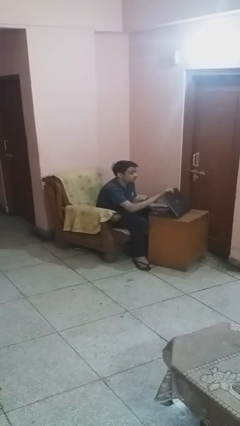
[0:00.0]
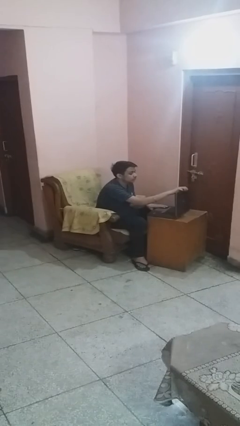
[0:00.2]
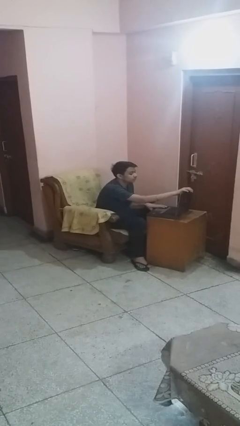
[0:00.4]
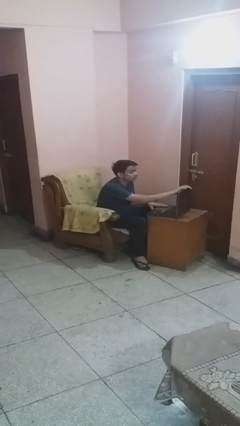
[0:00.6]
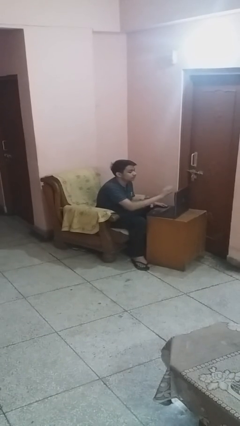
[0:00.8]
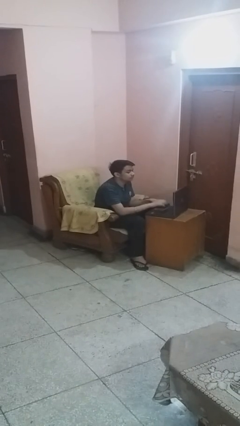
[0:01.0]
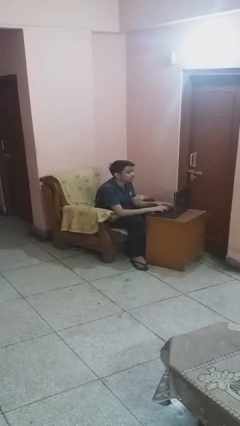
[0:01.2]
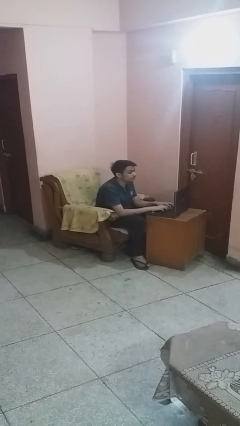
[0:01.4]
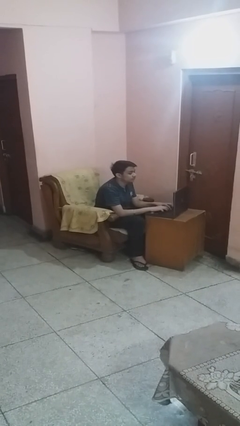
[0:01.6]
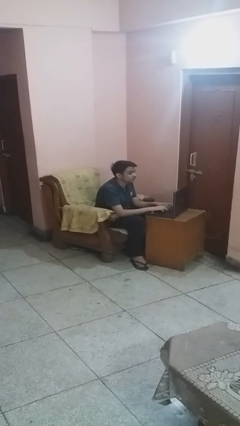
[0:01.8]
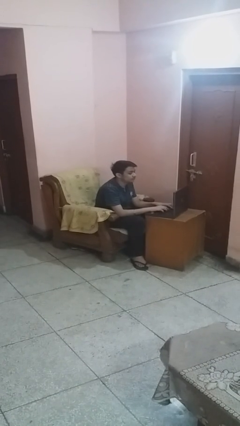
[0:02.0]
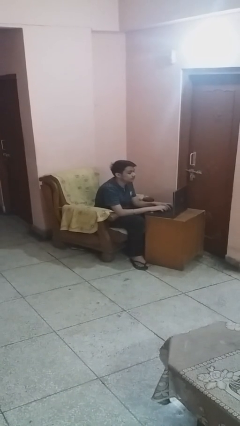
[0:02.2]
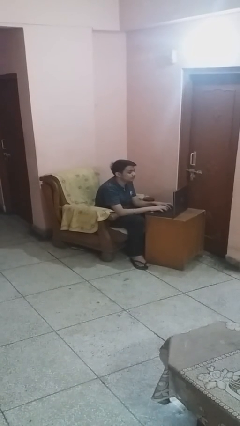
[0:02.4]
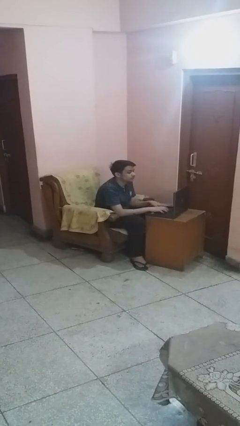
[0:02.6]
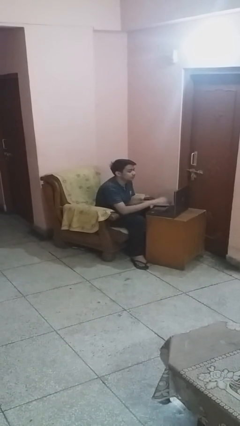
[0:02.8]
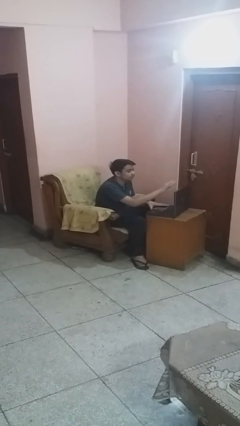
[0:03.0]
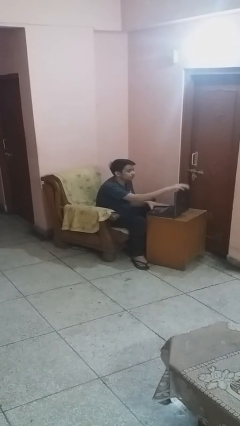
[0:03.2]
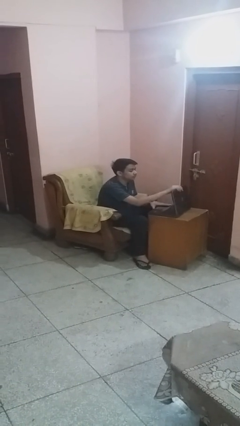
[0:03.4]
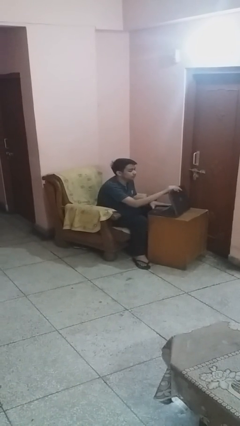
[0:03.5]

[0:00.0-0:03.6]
person interacts with laptop

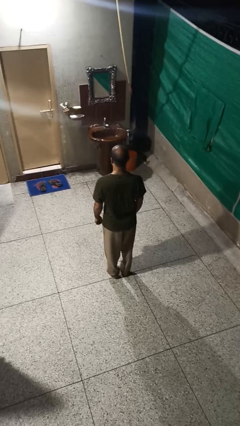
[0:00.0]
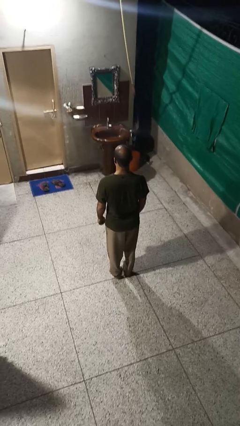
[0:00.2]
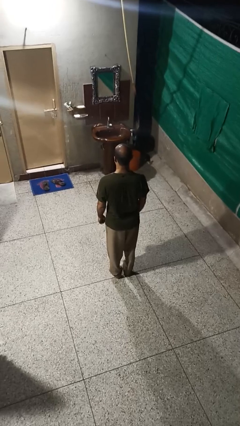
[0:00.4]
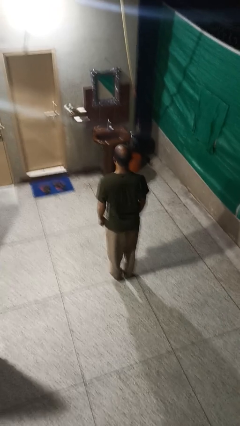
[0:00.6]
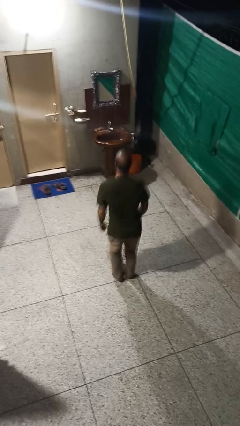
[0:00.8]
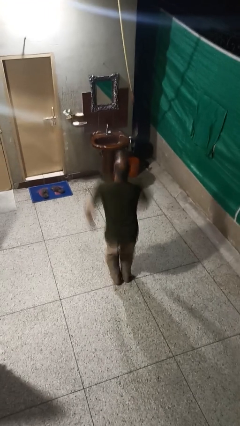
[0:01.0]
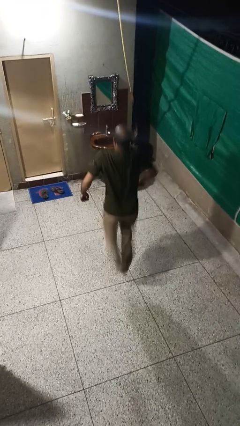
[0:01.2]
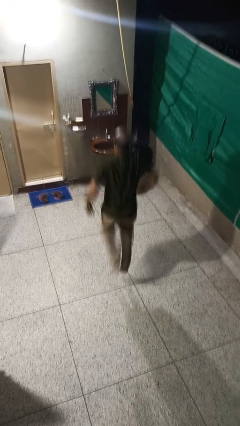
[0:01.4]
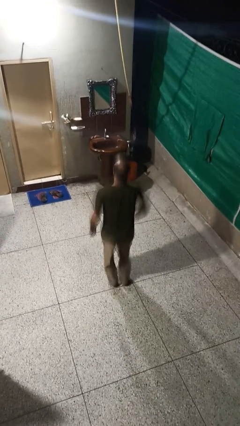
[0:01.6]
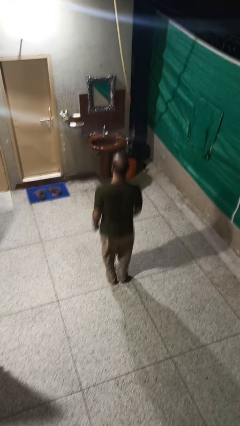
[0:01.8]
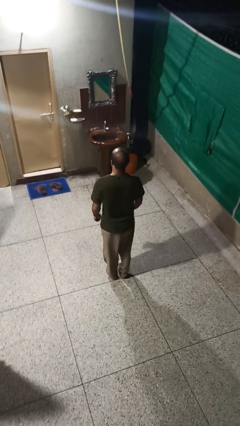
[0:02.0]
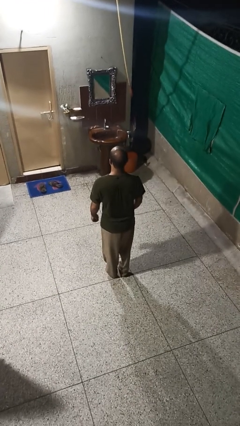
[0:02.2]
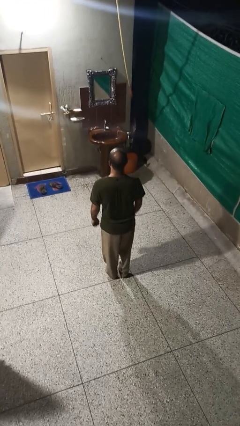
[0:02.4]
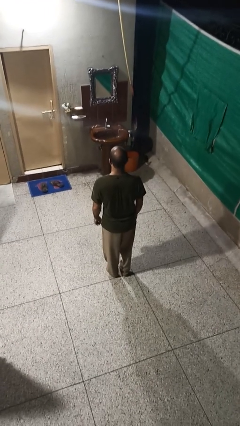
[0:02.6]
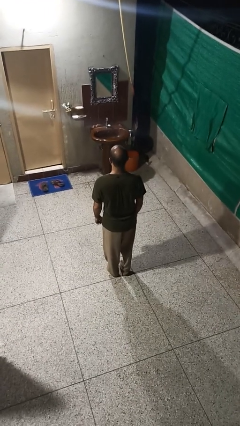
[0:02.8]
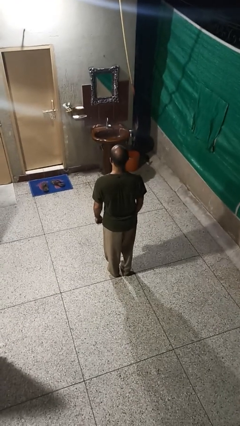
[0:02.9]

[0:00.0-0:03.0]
person jumps

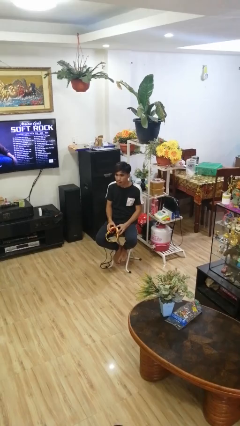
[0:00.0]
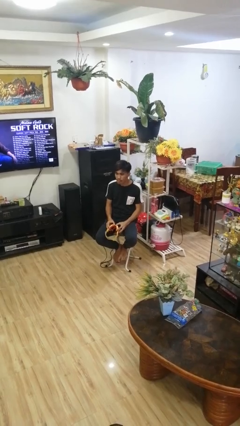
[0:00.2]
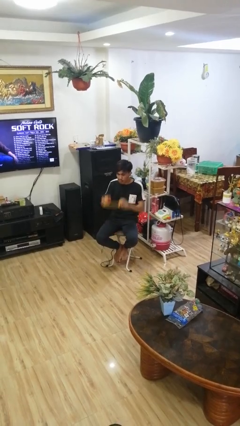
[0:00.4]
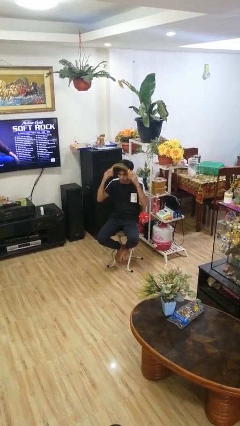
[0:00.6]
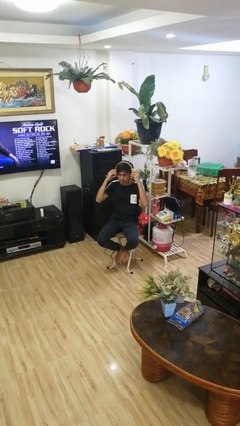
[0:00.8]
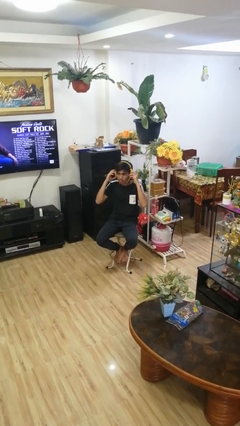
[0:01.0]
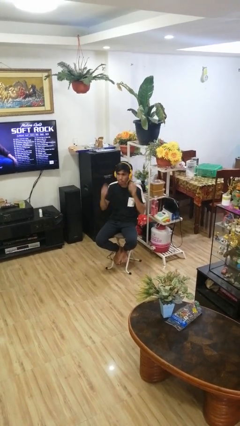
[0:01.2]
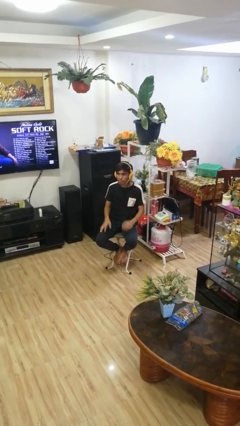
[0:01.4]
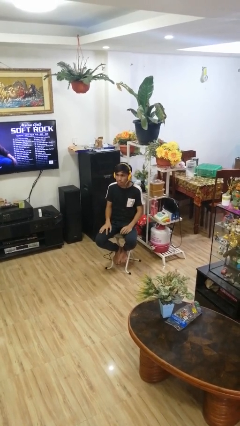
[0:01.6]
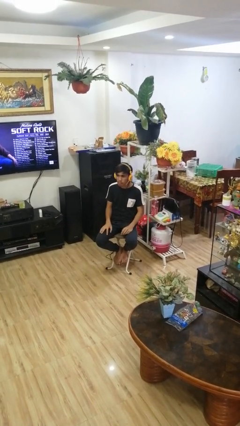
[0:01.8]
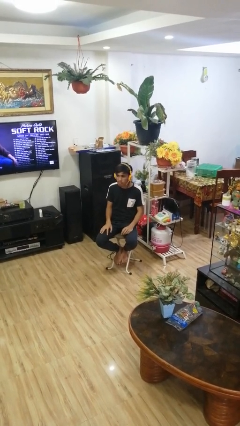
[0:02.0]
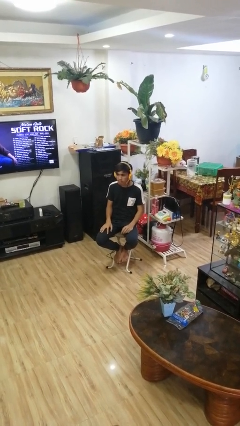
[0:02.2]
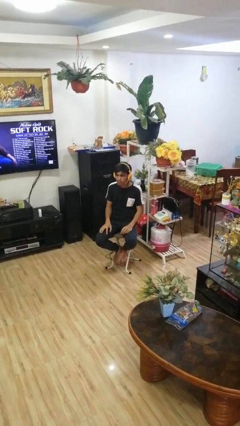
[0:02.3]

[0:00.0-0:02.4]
person puts on headphones

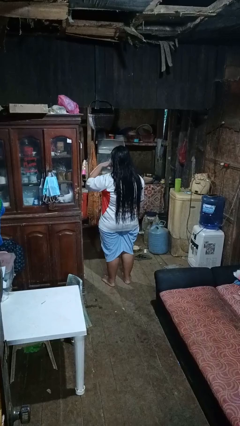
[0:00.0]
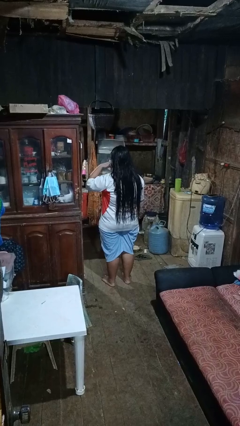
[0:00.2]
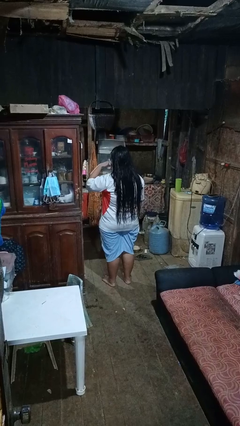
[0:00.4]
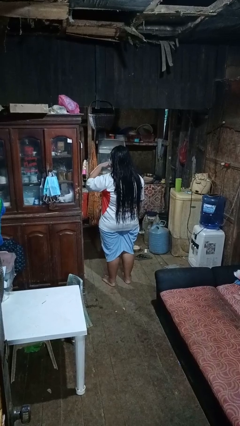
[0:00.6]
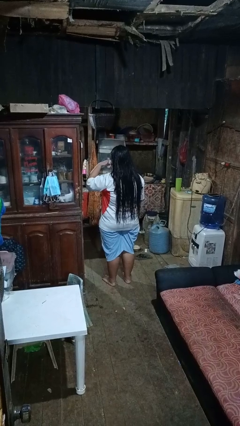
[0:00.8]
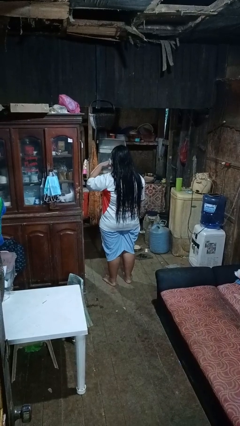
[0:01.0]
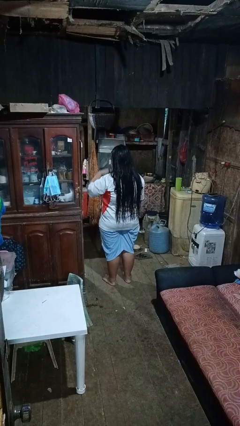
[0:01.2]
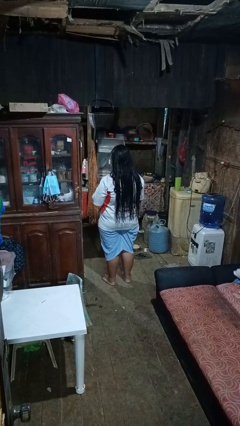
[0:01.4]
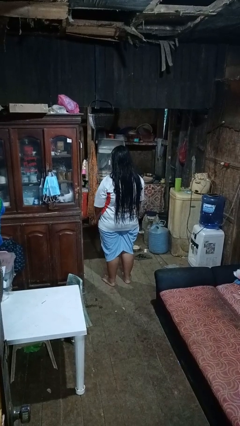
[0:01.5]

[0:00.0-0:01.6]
person gestures call me

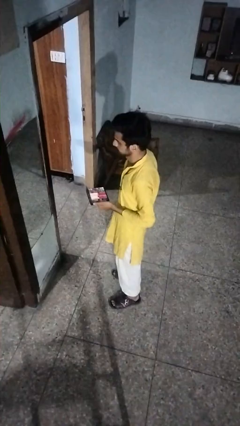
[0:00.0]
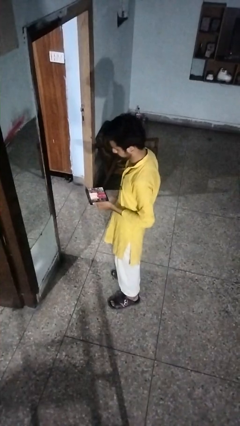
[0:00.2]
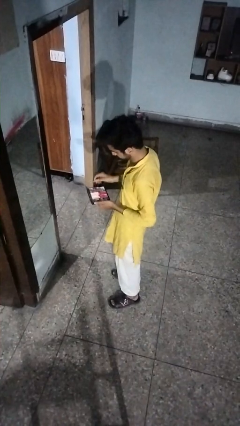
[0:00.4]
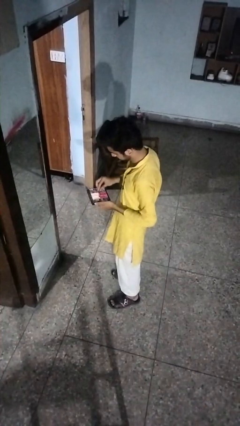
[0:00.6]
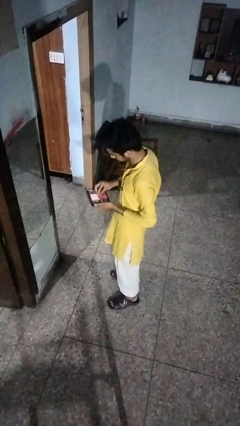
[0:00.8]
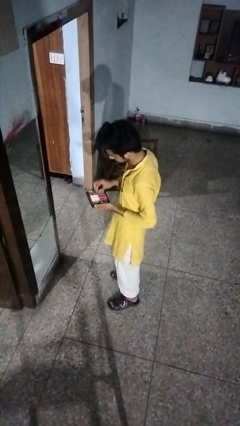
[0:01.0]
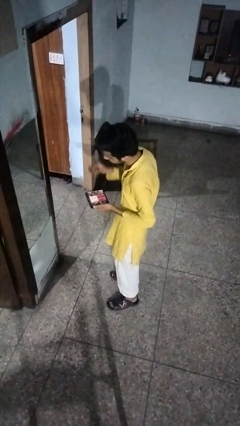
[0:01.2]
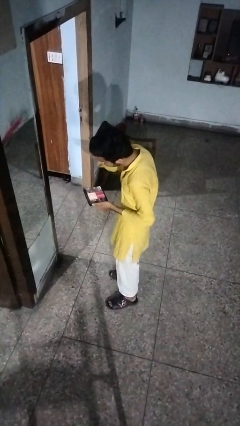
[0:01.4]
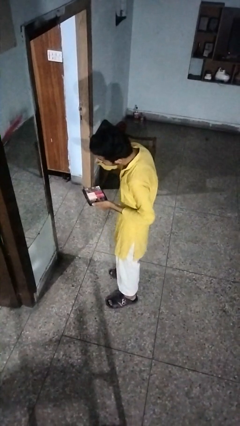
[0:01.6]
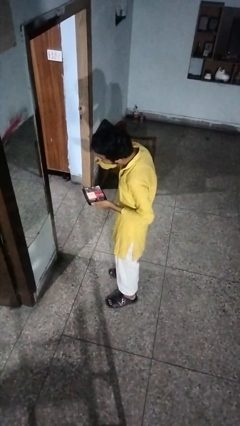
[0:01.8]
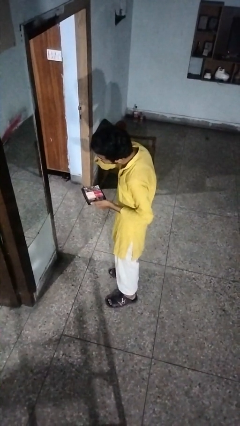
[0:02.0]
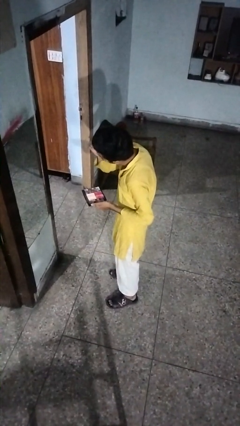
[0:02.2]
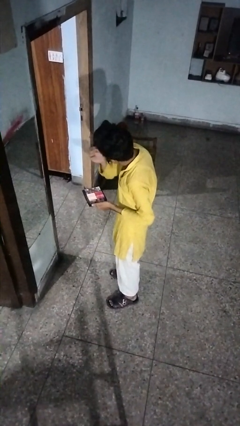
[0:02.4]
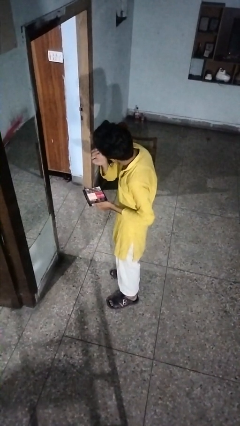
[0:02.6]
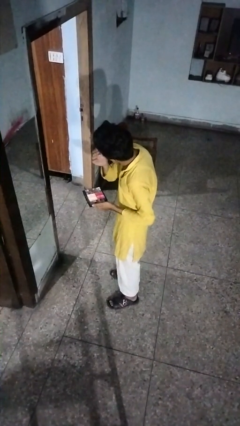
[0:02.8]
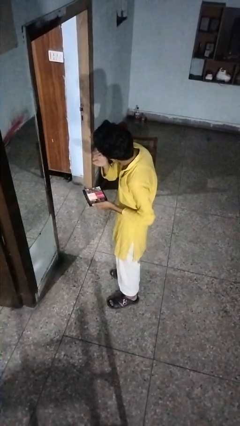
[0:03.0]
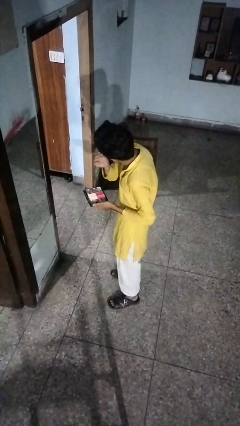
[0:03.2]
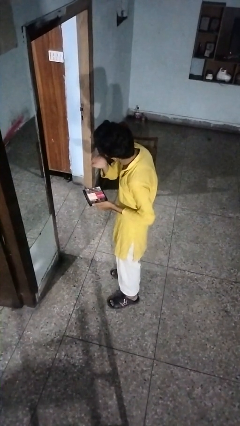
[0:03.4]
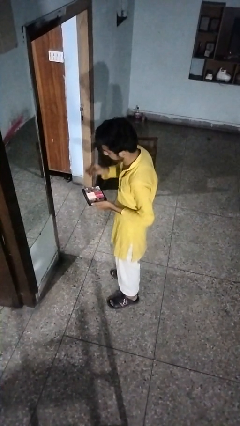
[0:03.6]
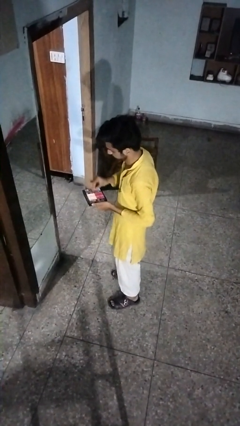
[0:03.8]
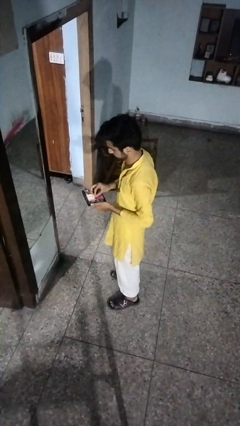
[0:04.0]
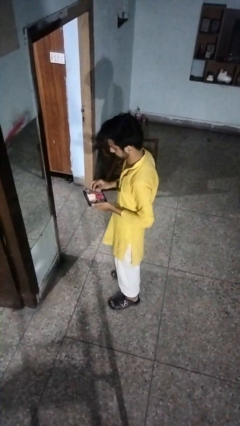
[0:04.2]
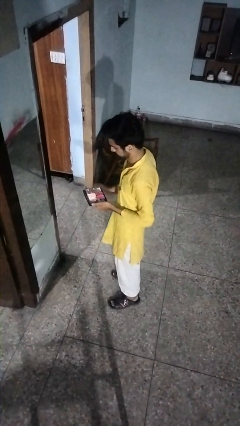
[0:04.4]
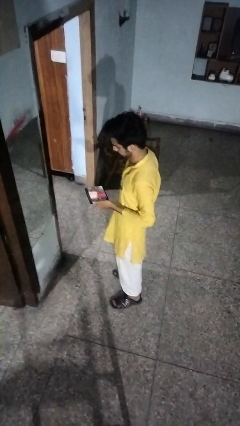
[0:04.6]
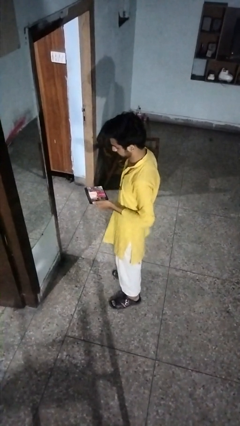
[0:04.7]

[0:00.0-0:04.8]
person applies eye makeup

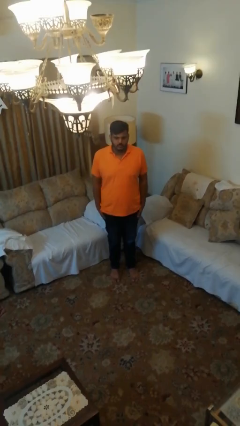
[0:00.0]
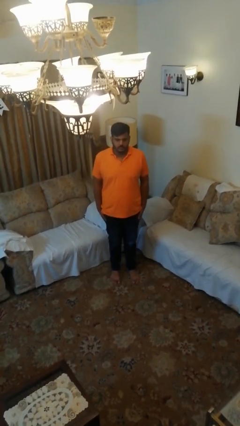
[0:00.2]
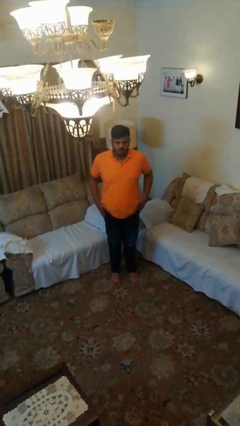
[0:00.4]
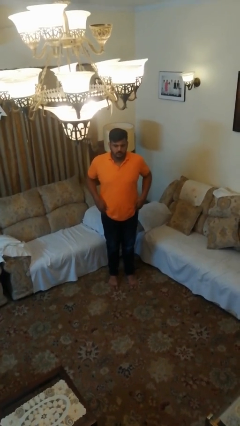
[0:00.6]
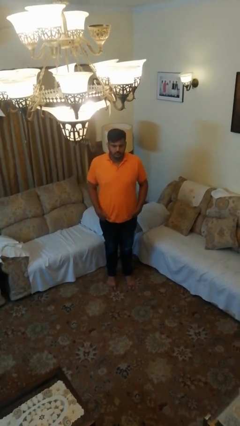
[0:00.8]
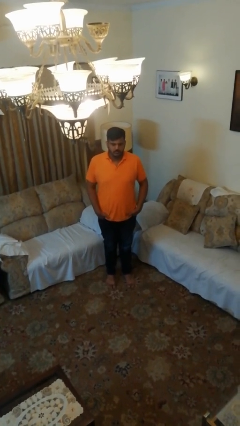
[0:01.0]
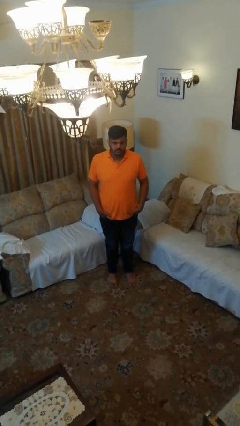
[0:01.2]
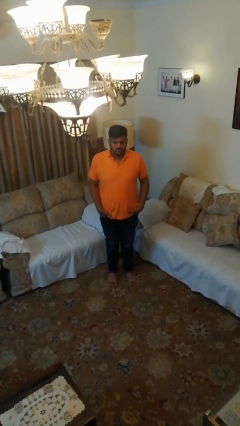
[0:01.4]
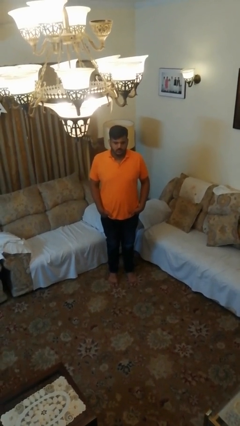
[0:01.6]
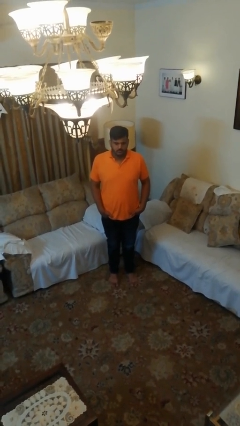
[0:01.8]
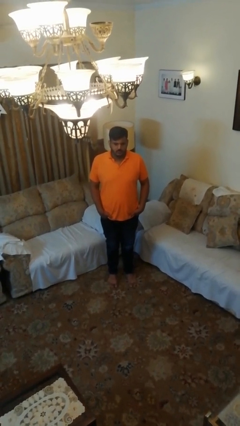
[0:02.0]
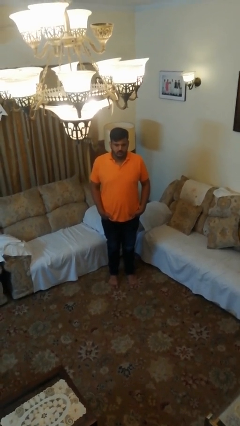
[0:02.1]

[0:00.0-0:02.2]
person puts hands in back pockets

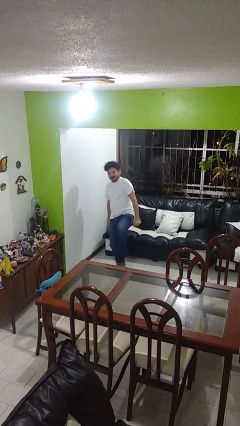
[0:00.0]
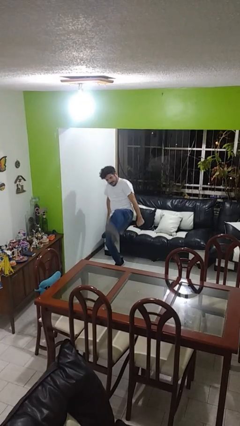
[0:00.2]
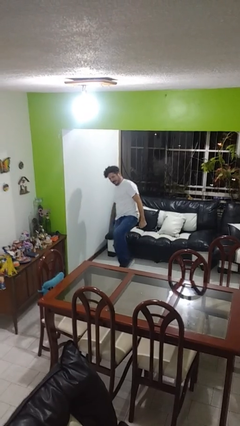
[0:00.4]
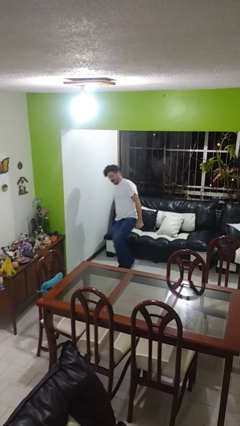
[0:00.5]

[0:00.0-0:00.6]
person karate kicks
